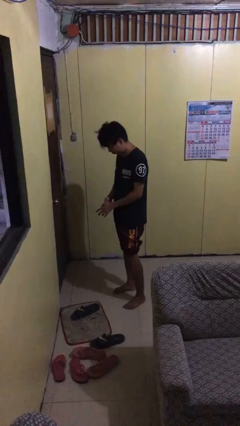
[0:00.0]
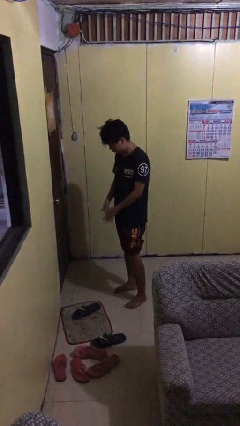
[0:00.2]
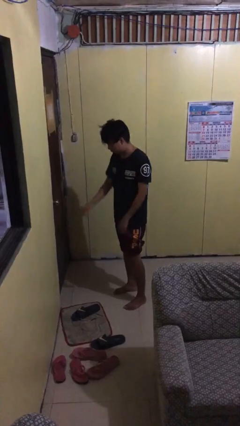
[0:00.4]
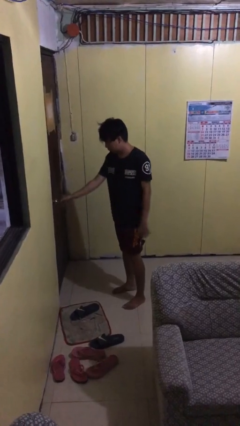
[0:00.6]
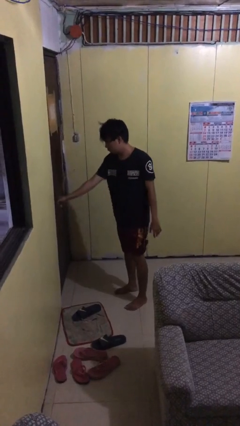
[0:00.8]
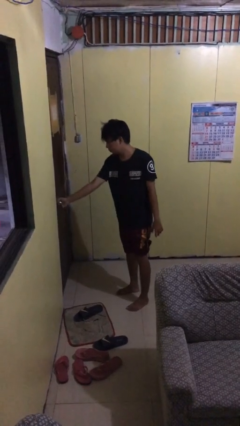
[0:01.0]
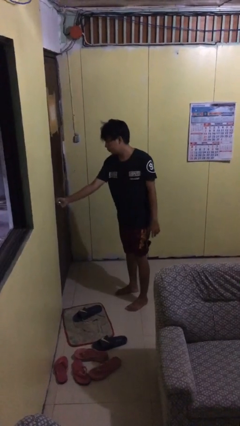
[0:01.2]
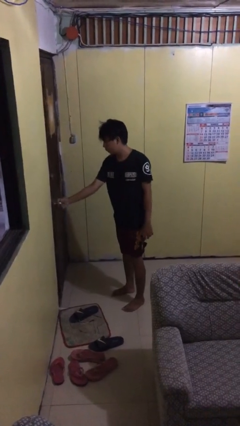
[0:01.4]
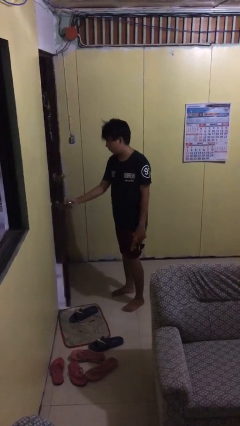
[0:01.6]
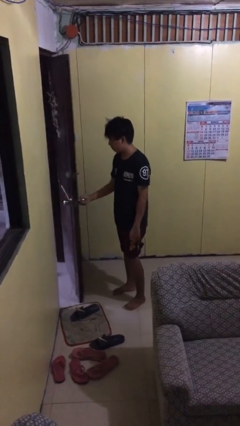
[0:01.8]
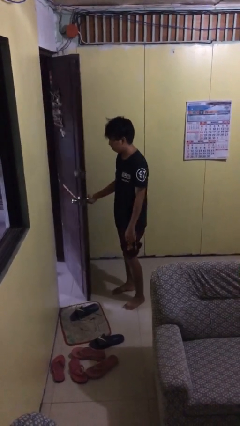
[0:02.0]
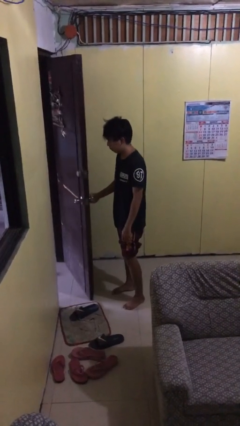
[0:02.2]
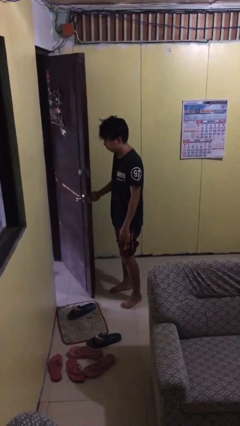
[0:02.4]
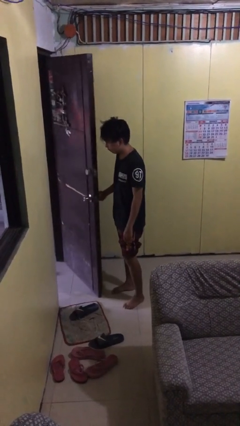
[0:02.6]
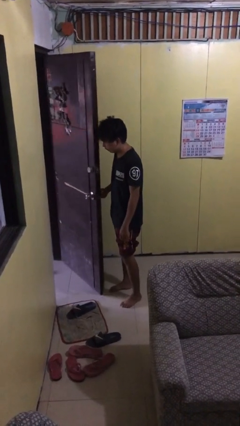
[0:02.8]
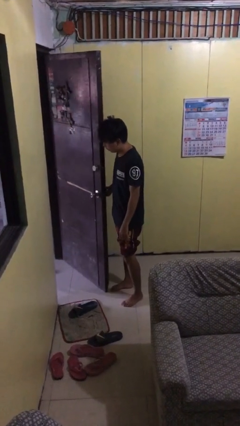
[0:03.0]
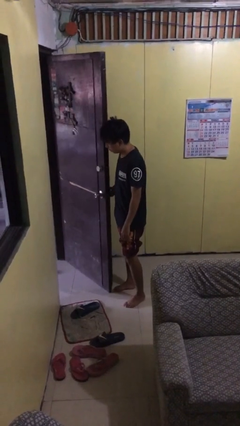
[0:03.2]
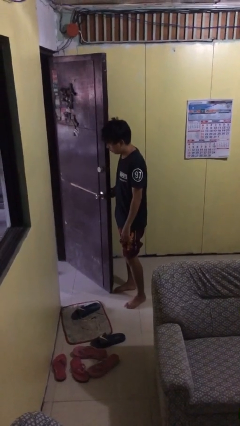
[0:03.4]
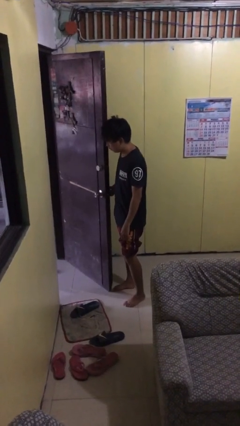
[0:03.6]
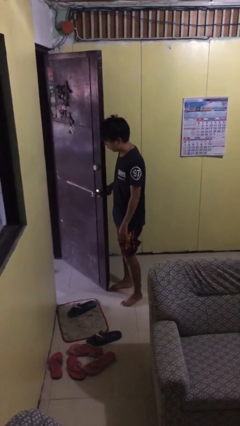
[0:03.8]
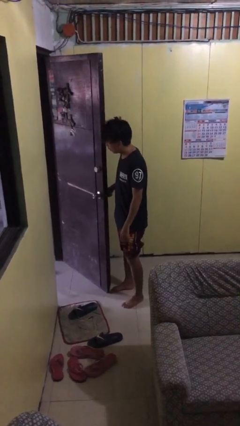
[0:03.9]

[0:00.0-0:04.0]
person opens facility door

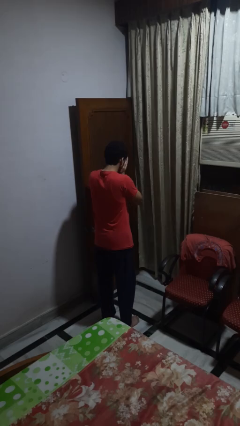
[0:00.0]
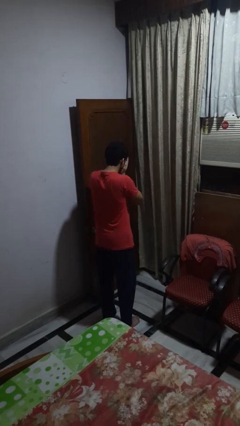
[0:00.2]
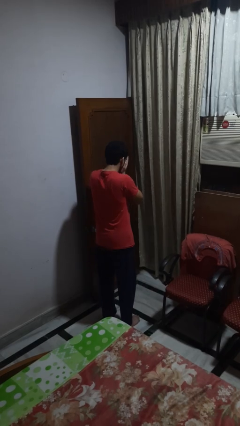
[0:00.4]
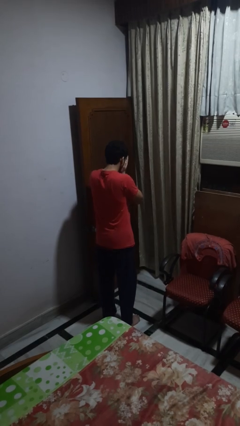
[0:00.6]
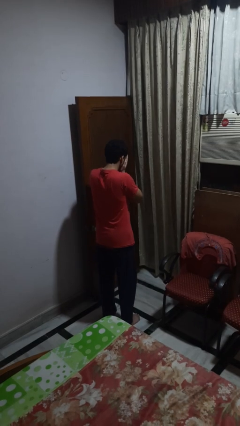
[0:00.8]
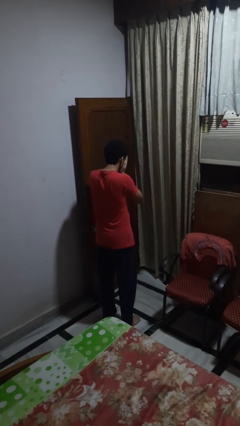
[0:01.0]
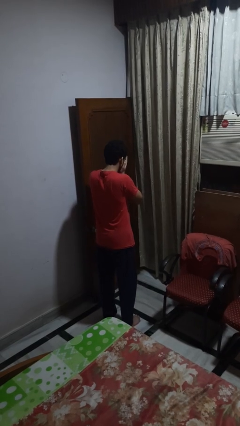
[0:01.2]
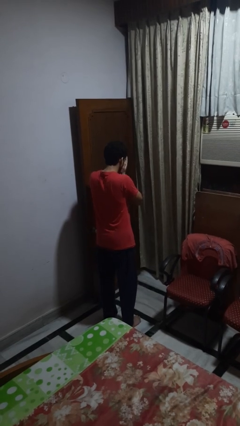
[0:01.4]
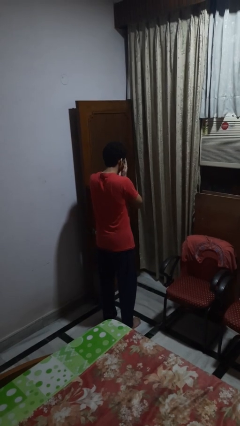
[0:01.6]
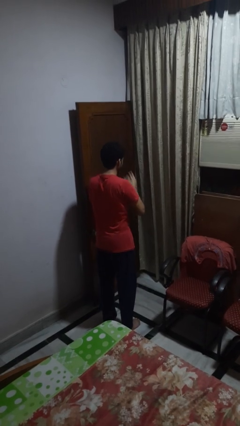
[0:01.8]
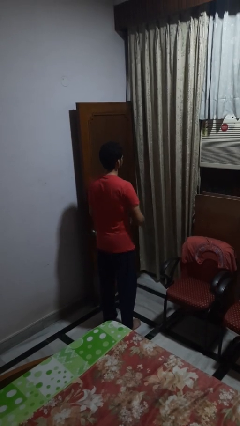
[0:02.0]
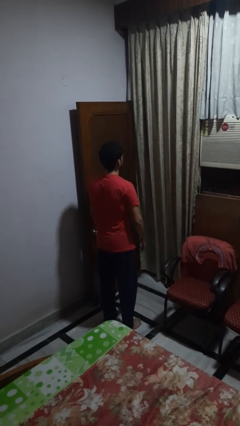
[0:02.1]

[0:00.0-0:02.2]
person covers face with hands

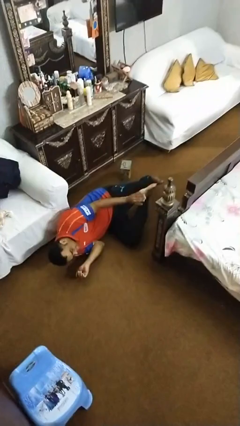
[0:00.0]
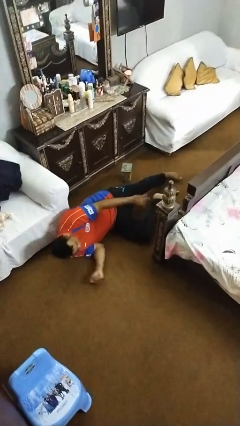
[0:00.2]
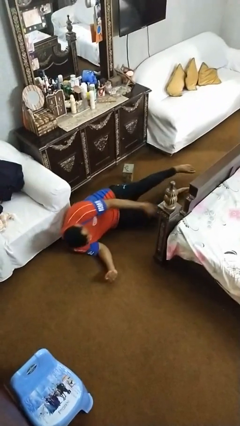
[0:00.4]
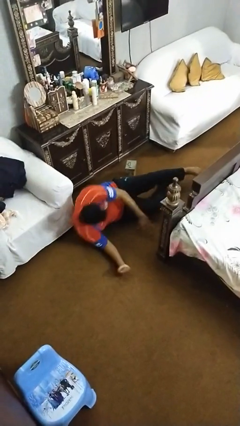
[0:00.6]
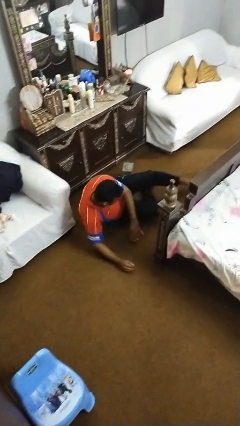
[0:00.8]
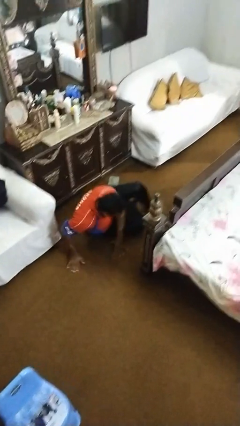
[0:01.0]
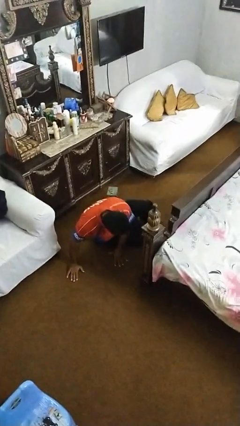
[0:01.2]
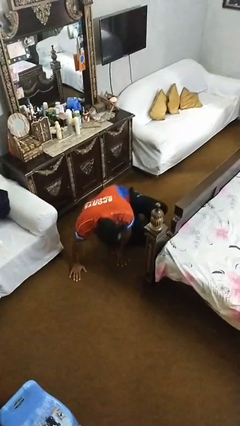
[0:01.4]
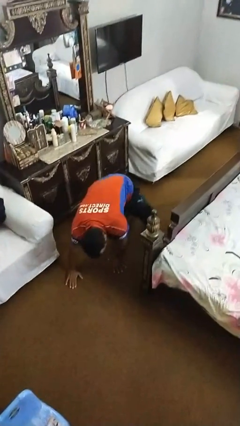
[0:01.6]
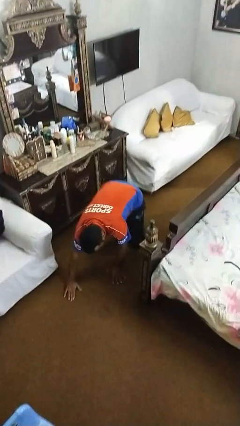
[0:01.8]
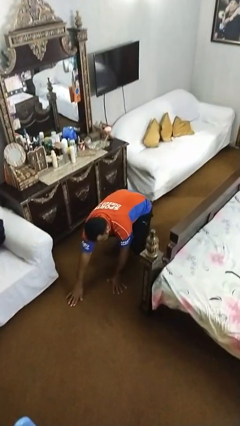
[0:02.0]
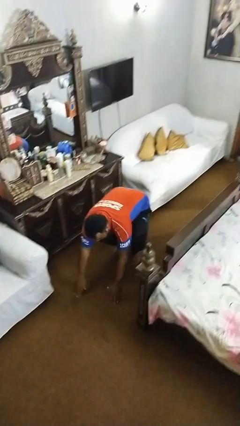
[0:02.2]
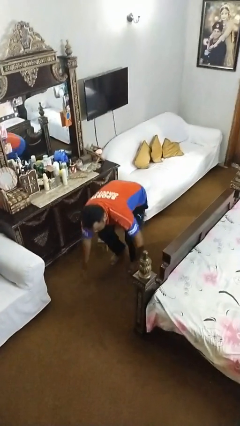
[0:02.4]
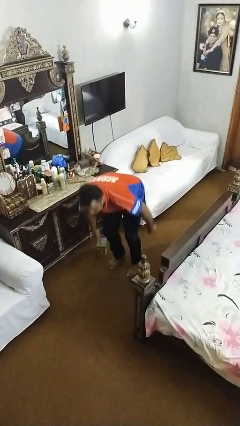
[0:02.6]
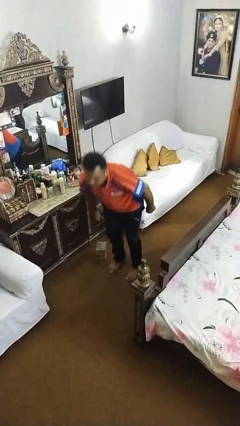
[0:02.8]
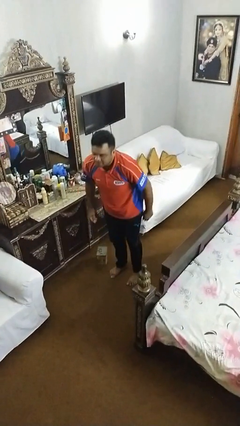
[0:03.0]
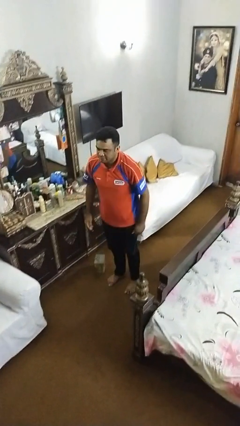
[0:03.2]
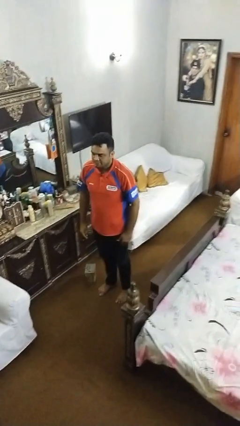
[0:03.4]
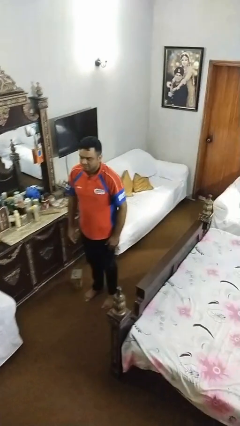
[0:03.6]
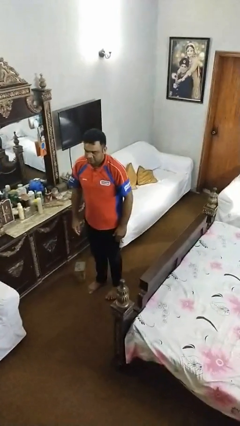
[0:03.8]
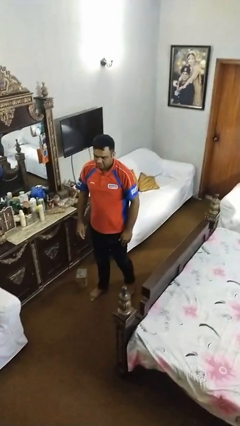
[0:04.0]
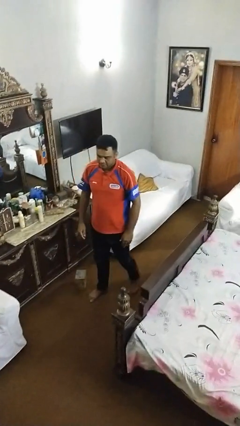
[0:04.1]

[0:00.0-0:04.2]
person stands up from floor

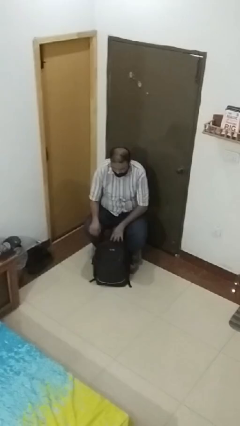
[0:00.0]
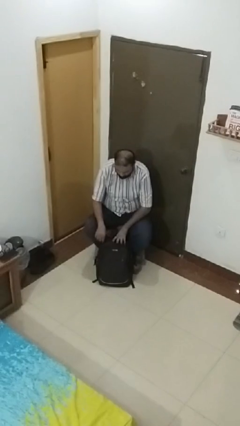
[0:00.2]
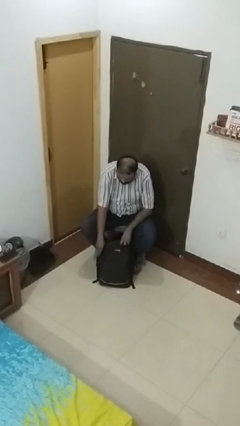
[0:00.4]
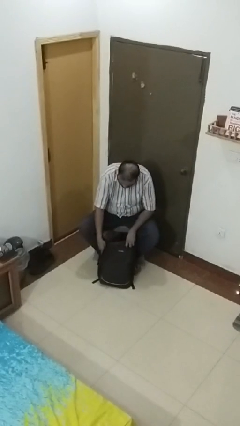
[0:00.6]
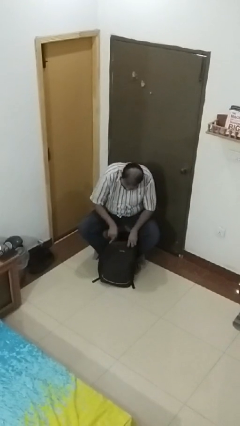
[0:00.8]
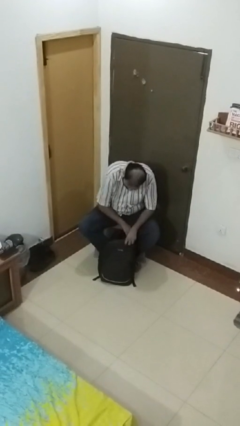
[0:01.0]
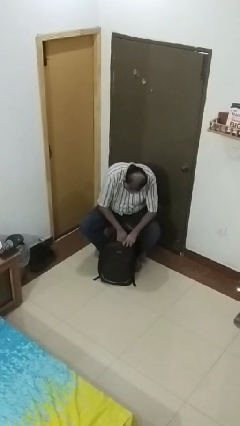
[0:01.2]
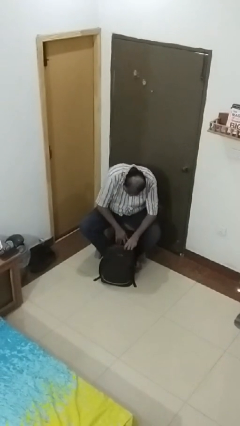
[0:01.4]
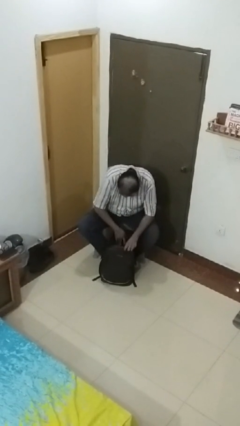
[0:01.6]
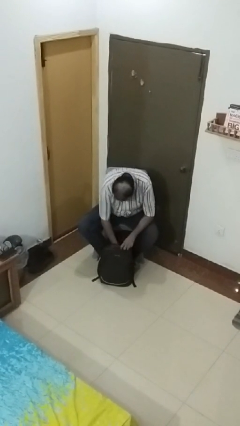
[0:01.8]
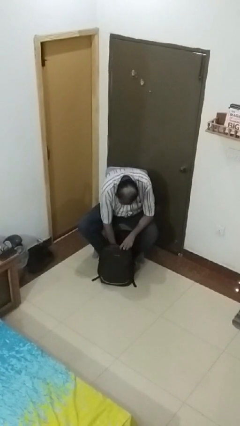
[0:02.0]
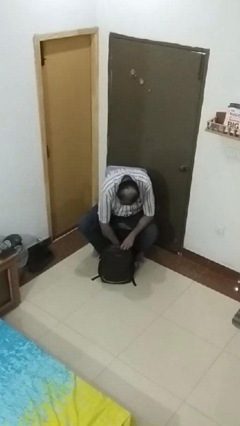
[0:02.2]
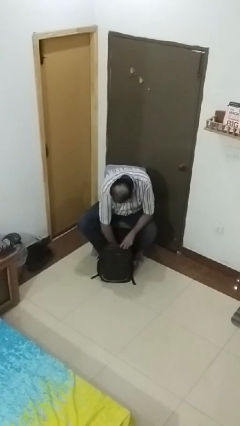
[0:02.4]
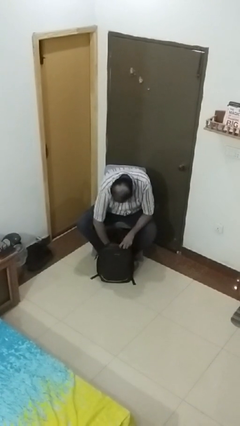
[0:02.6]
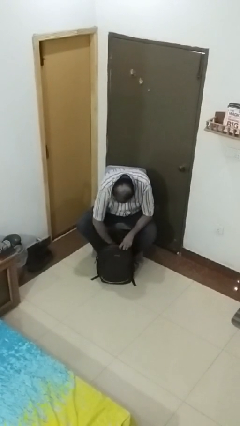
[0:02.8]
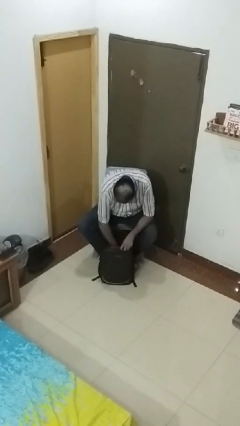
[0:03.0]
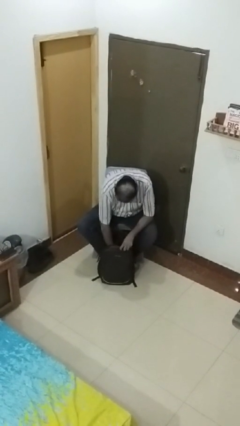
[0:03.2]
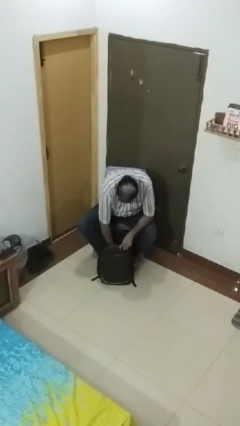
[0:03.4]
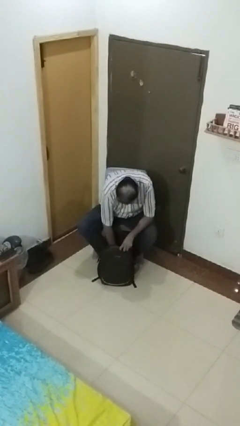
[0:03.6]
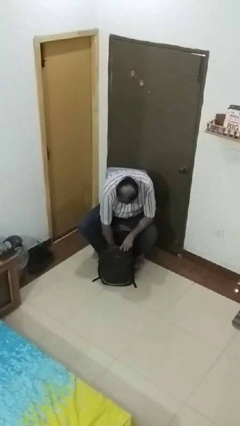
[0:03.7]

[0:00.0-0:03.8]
person searches in backpack

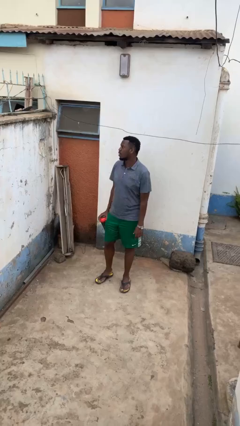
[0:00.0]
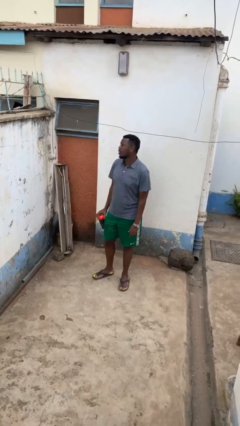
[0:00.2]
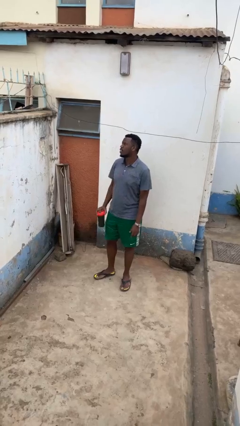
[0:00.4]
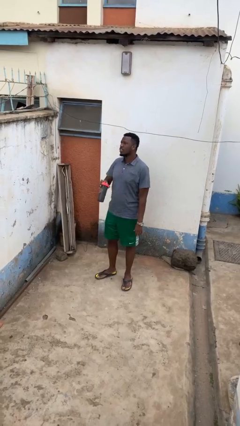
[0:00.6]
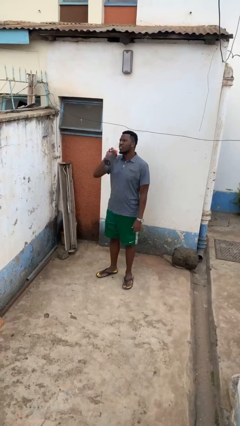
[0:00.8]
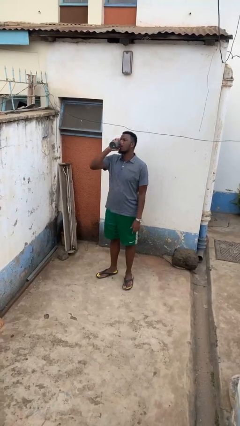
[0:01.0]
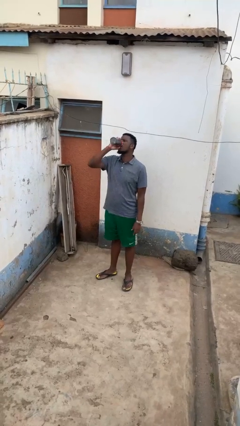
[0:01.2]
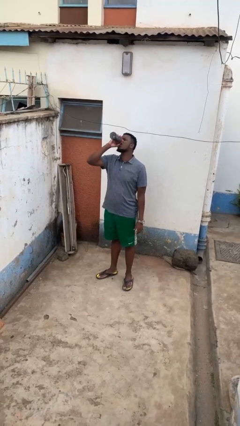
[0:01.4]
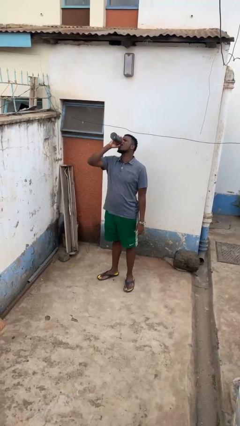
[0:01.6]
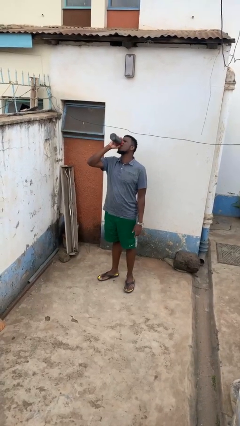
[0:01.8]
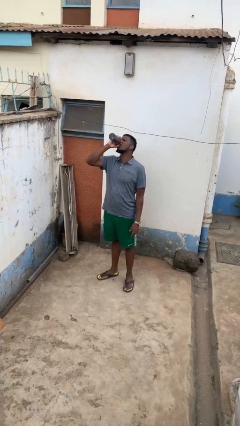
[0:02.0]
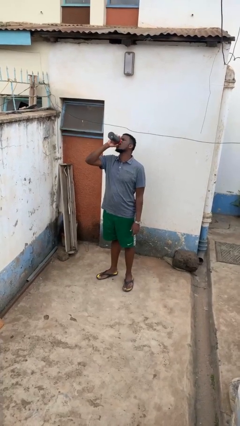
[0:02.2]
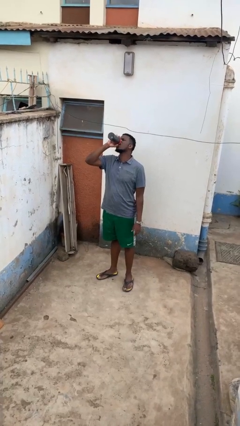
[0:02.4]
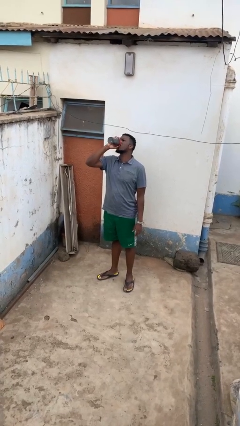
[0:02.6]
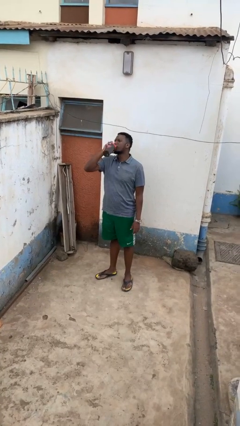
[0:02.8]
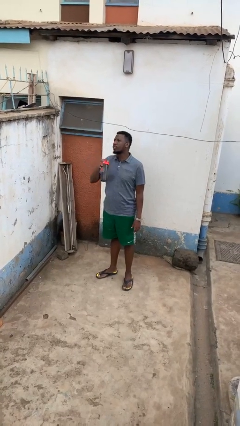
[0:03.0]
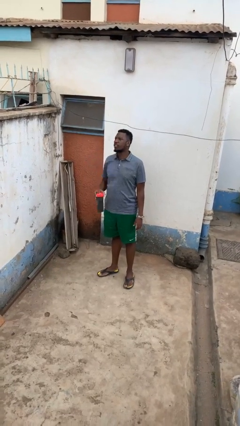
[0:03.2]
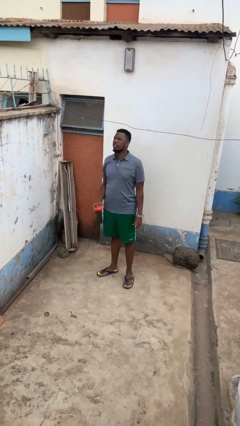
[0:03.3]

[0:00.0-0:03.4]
person drinks from bottle
